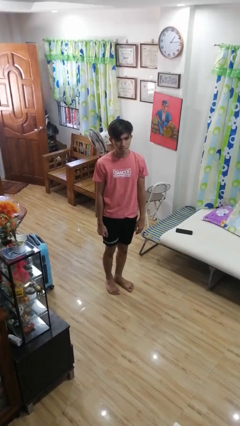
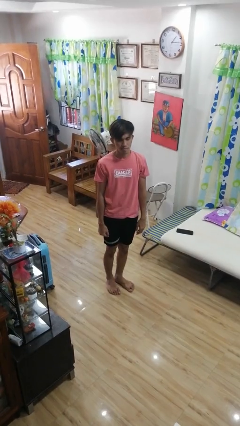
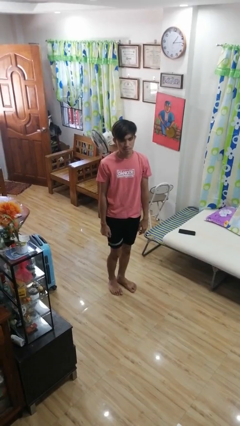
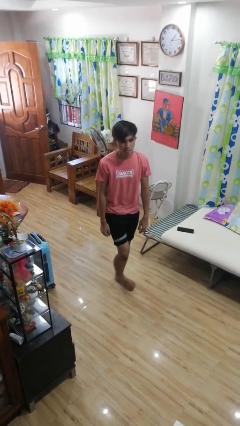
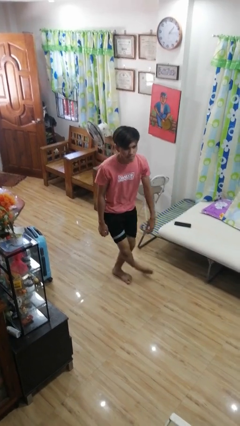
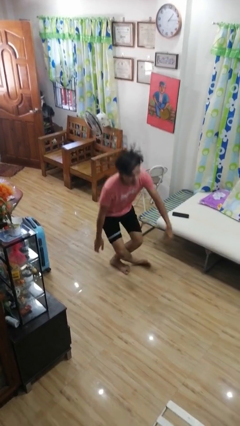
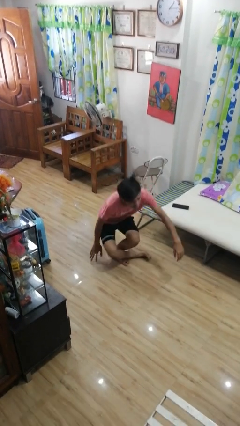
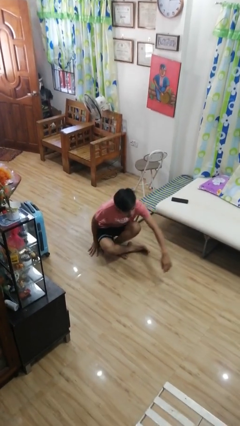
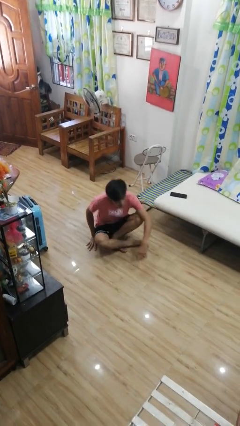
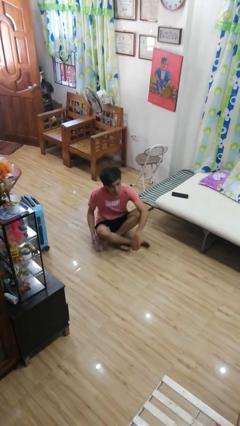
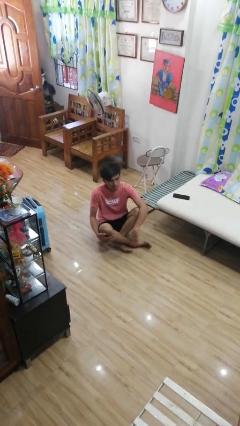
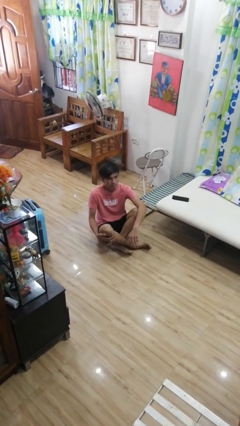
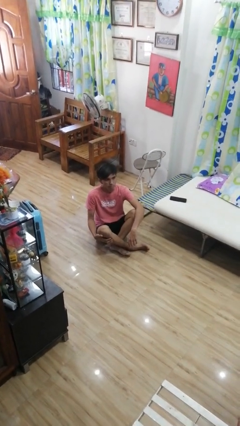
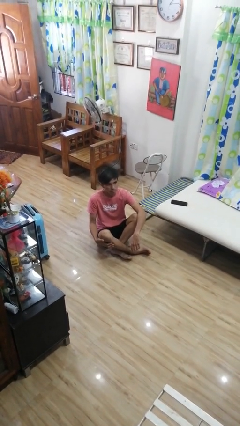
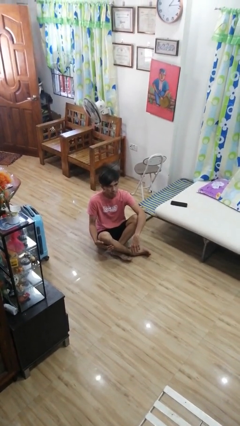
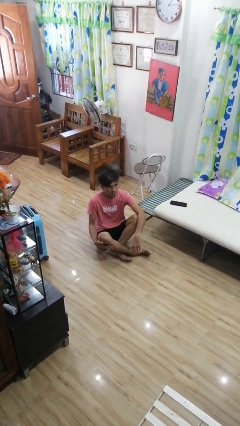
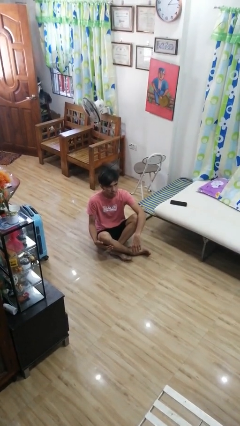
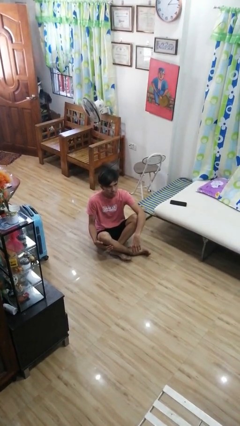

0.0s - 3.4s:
person sits crisscross

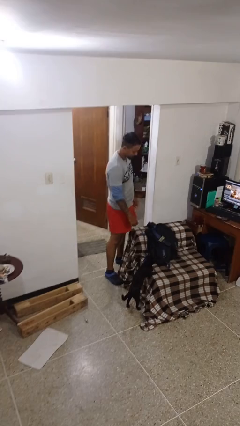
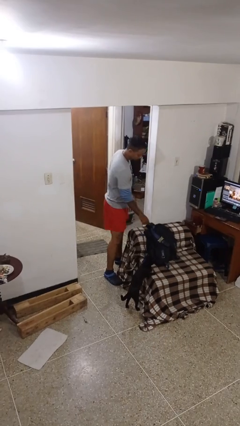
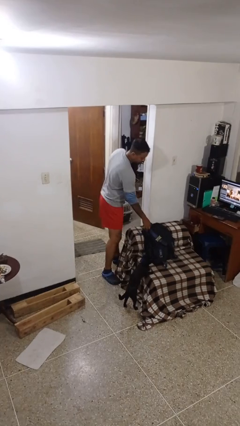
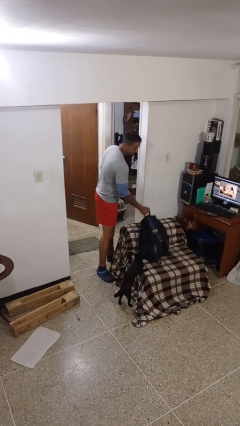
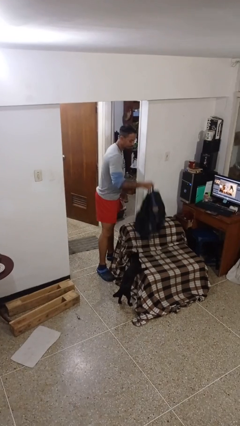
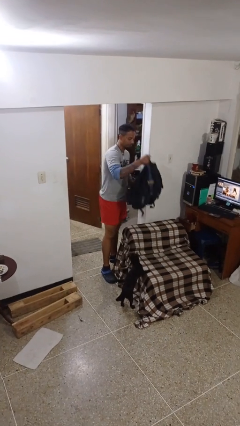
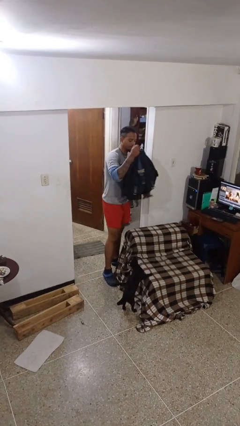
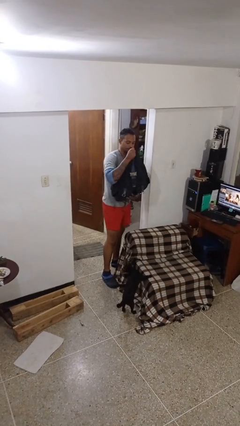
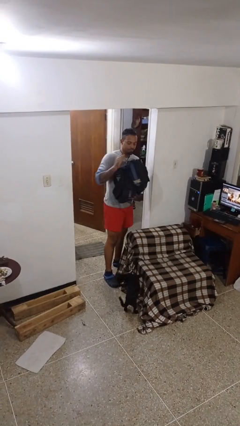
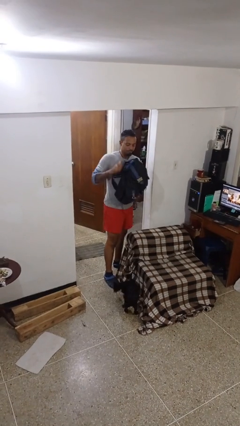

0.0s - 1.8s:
person picks up object from couch

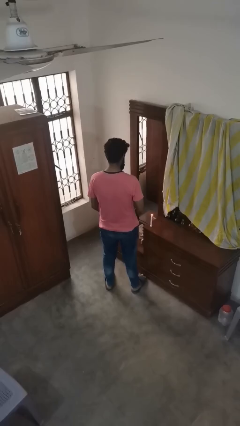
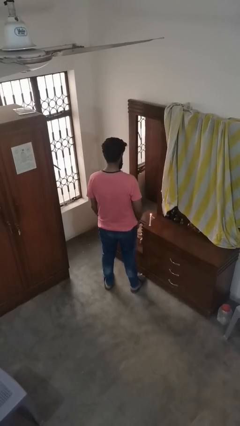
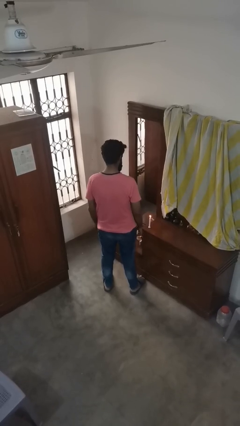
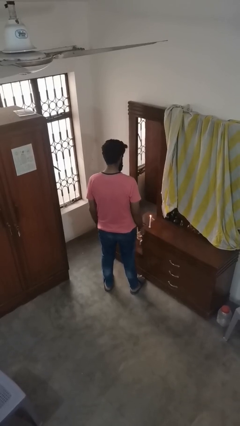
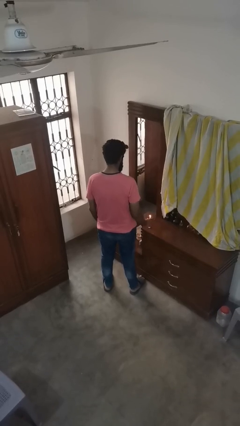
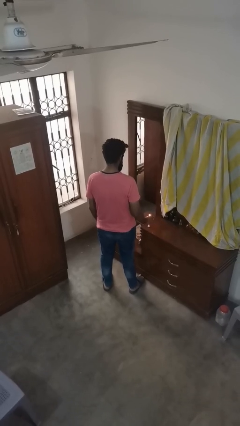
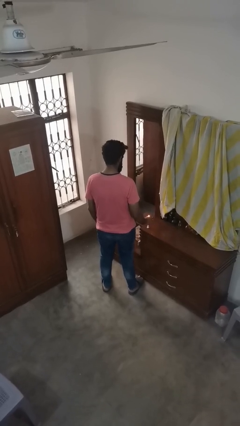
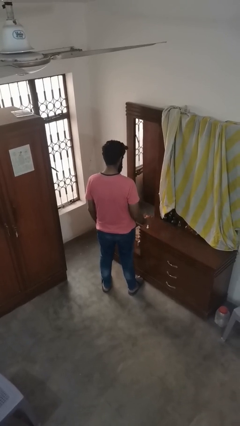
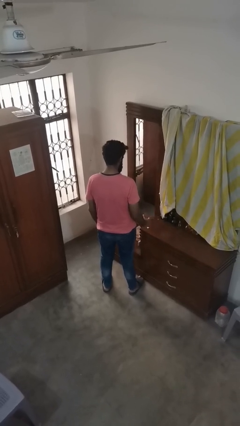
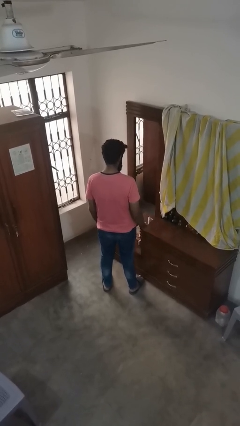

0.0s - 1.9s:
person extinguishes candle

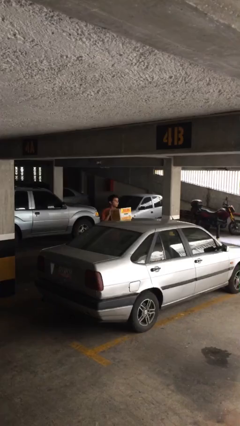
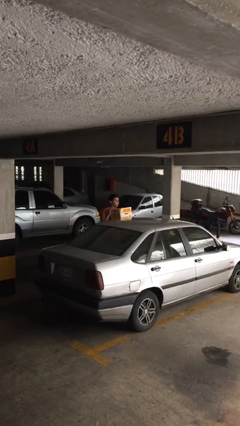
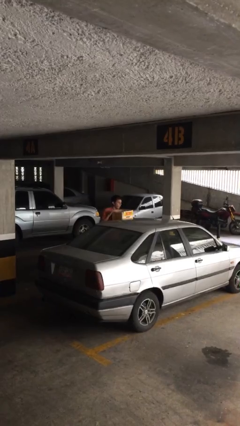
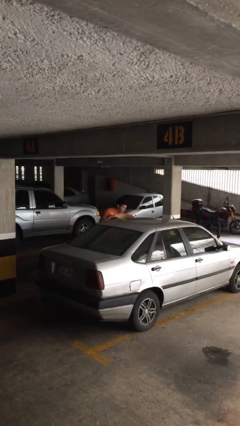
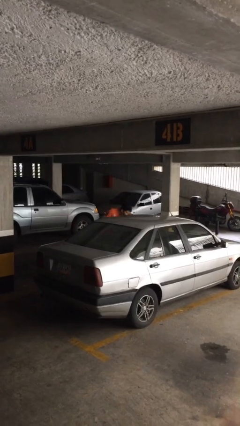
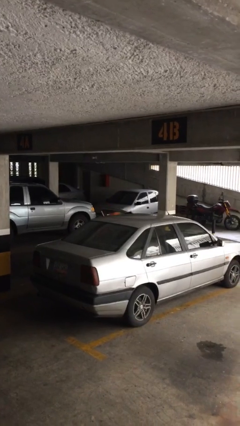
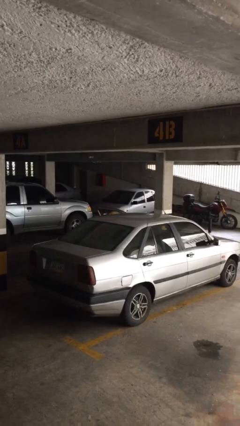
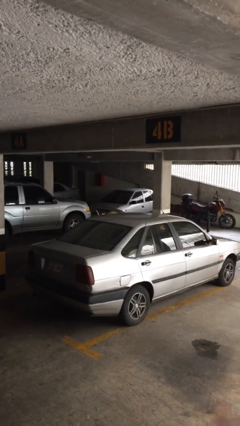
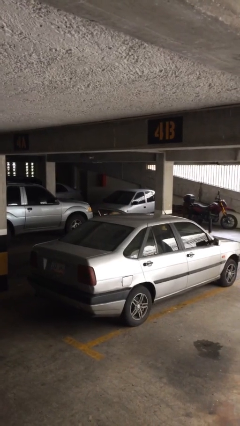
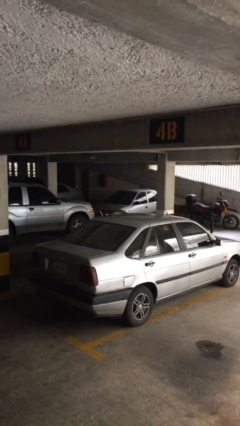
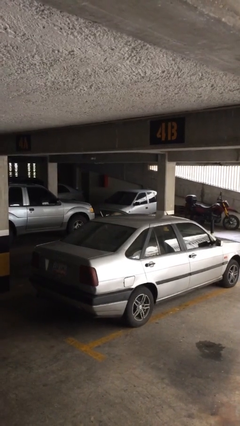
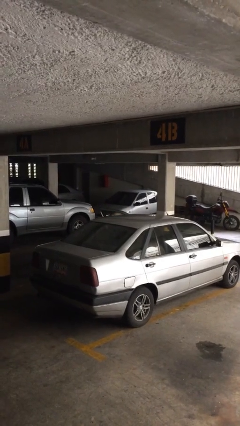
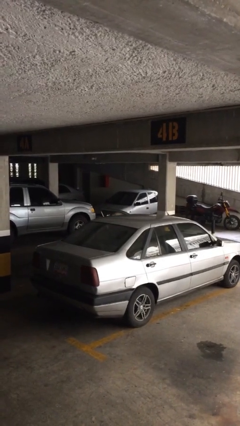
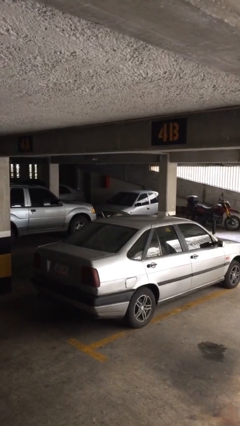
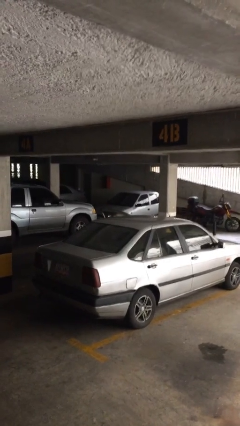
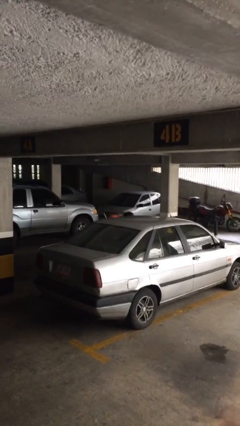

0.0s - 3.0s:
person loads car

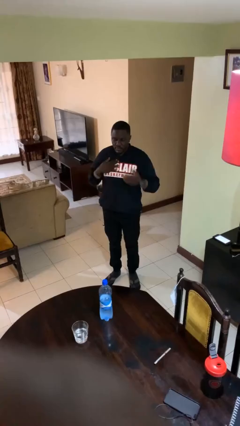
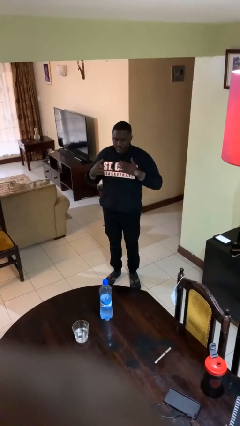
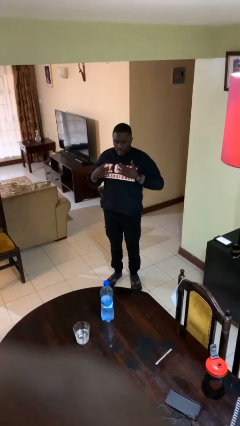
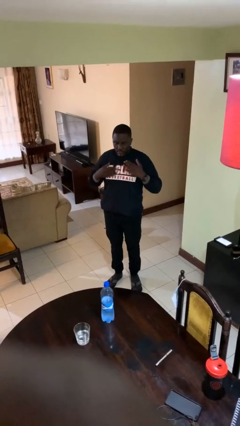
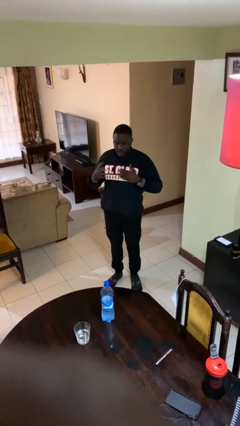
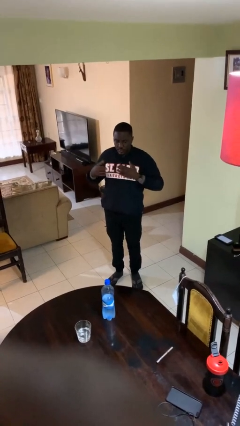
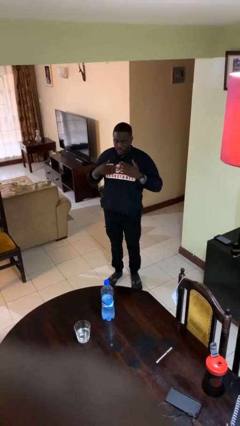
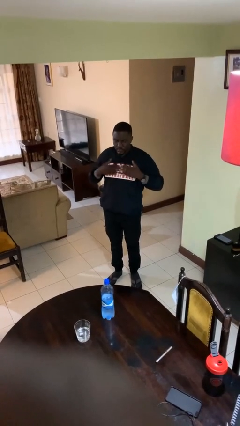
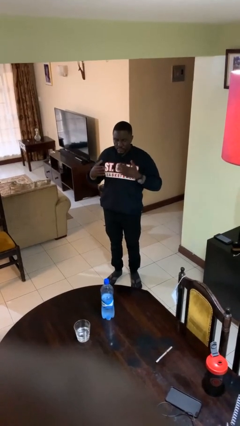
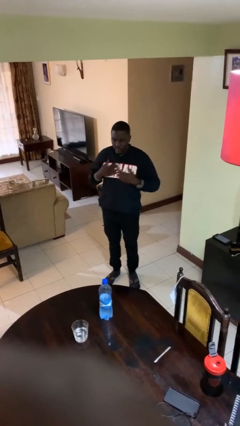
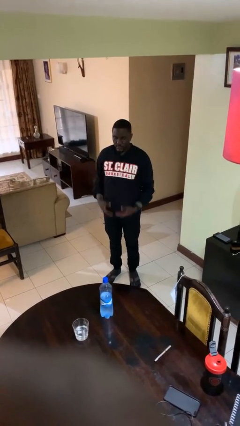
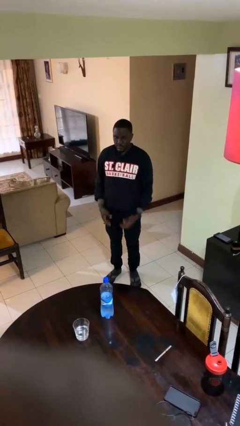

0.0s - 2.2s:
person drums on chest

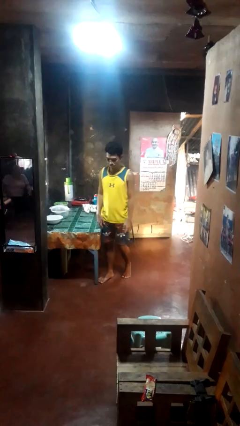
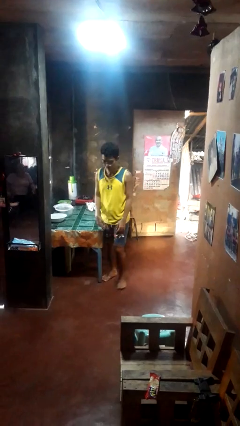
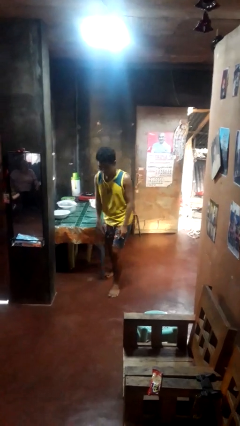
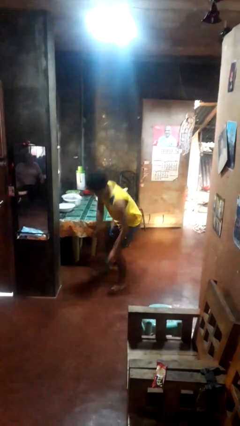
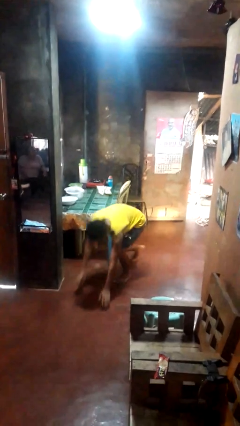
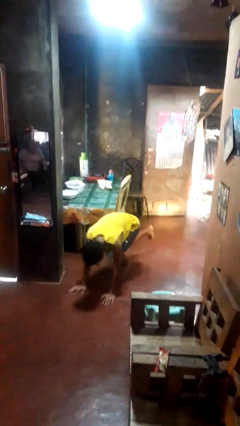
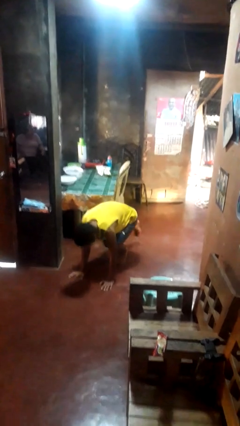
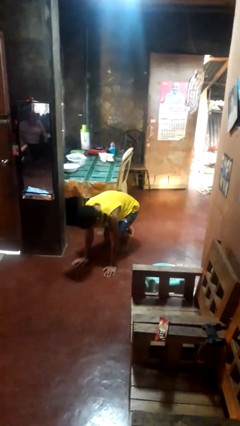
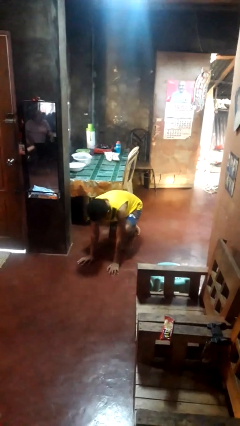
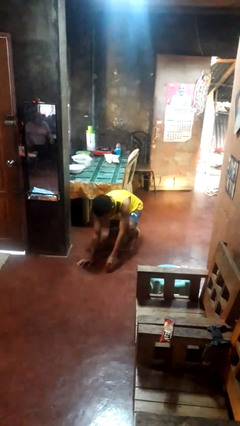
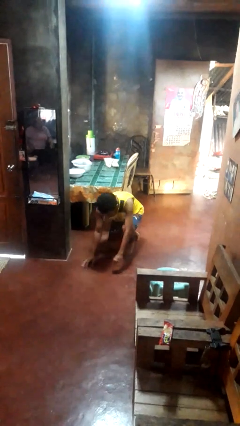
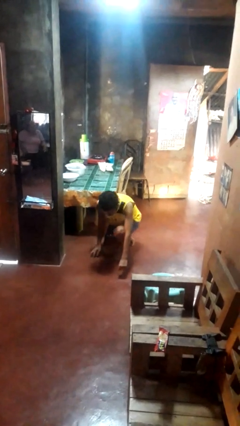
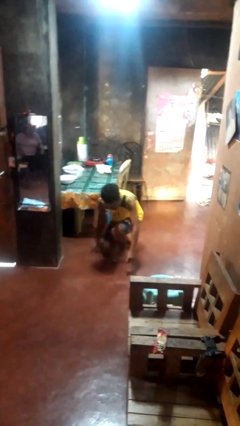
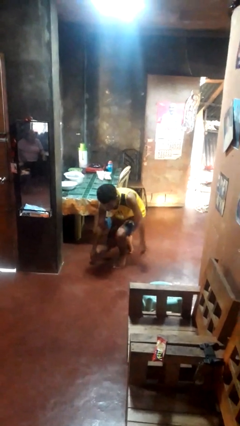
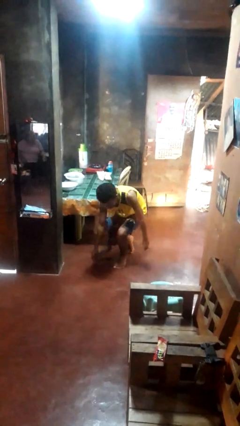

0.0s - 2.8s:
person trips on object on floor

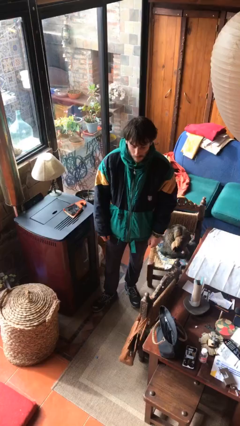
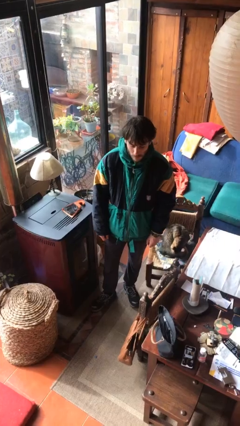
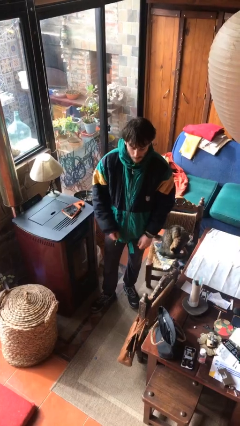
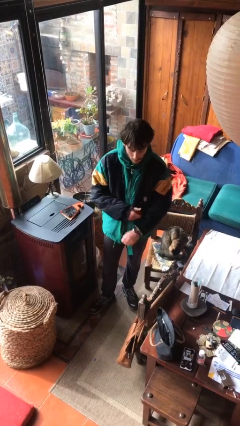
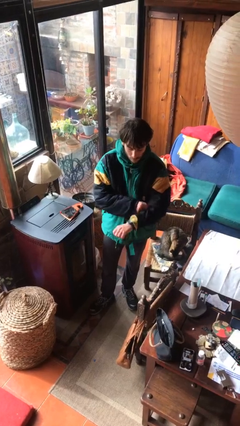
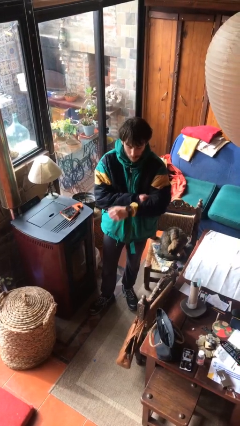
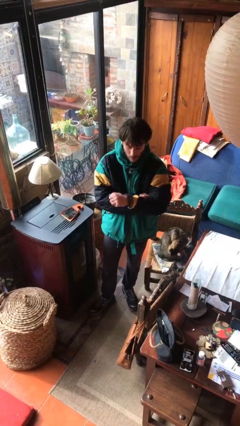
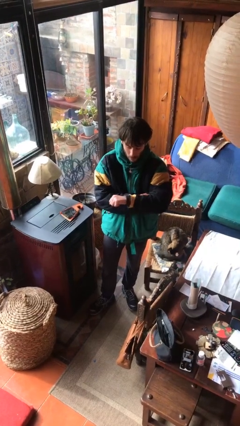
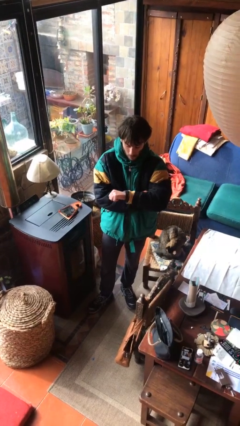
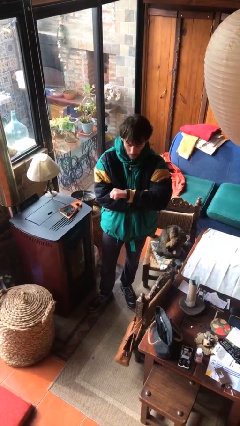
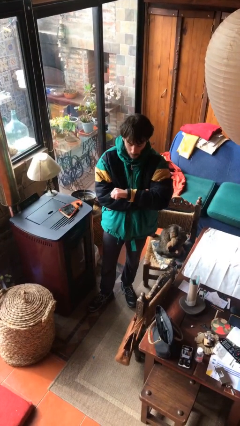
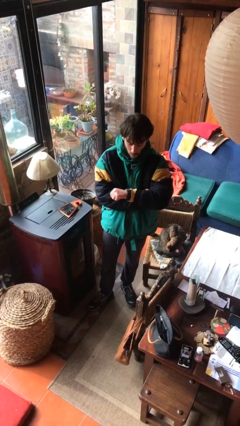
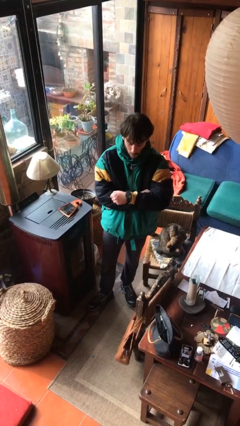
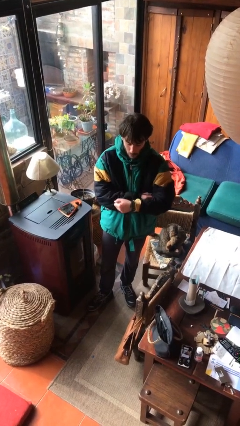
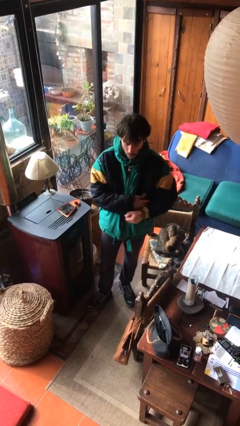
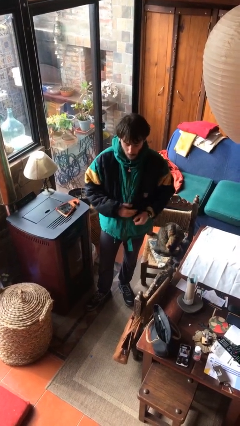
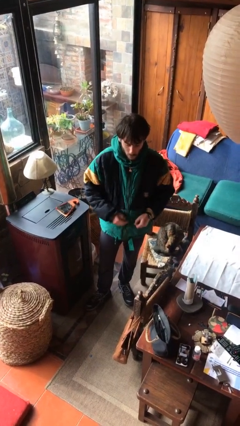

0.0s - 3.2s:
person looks at wristwatch
